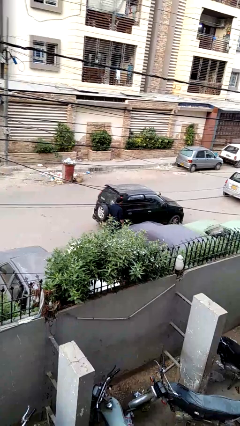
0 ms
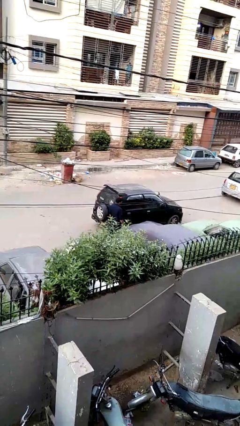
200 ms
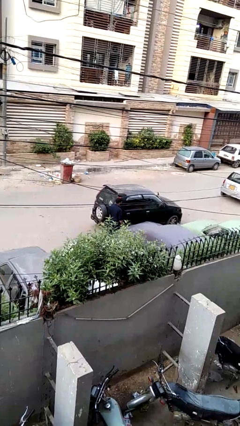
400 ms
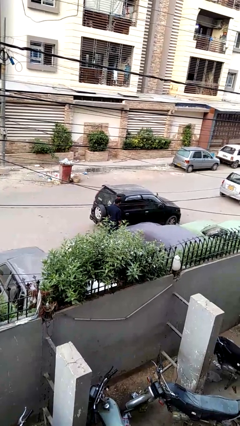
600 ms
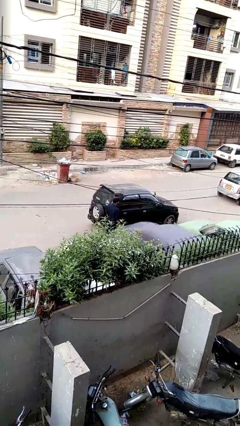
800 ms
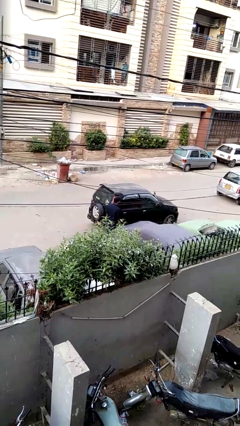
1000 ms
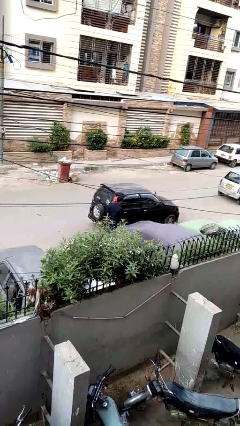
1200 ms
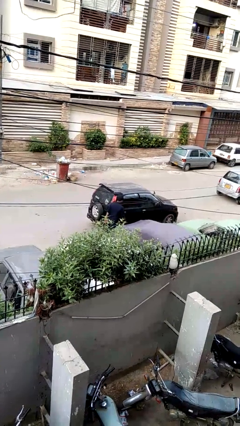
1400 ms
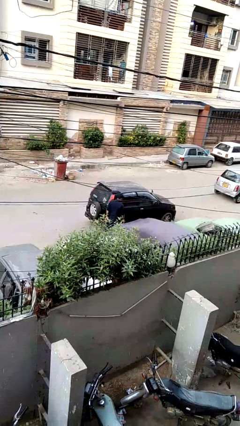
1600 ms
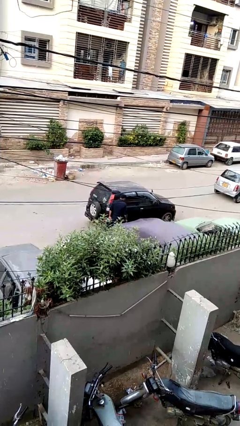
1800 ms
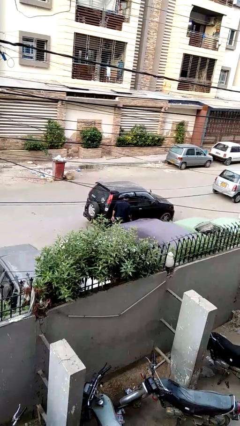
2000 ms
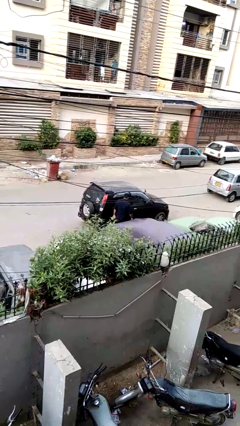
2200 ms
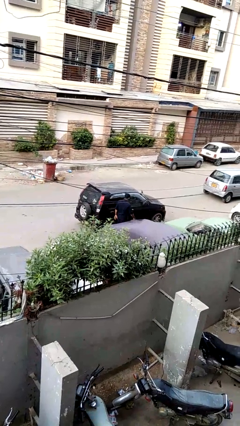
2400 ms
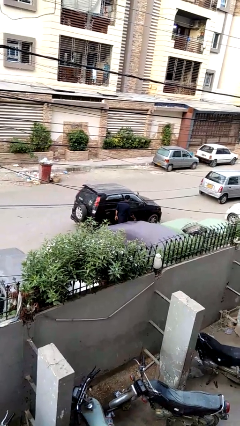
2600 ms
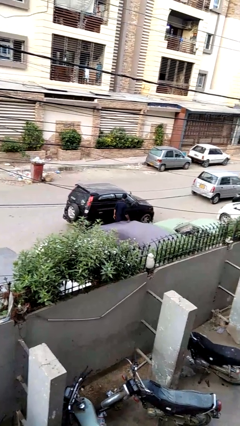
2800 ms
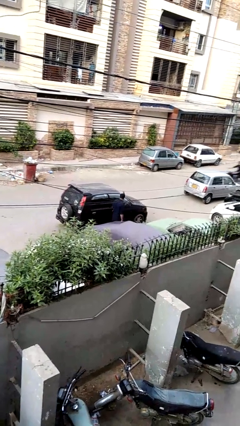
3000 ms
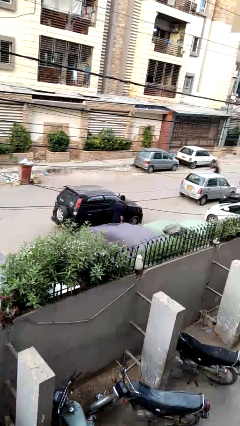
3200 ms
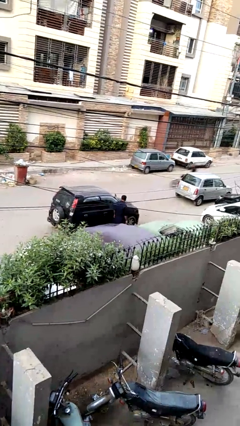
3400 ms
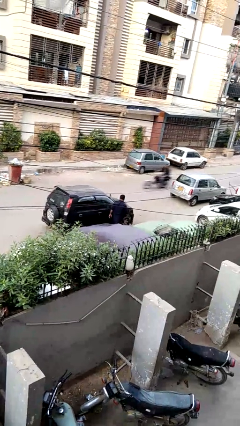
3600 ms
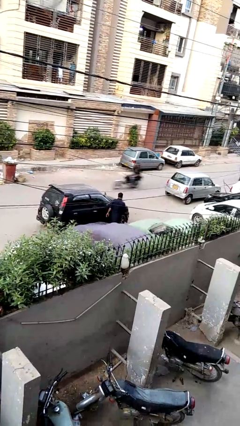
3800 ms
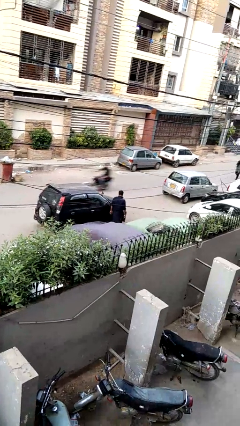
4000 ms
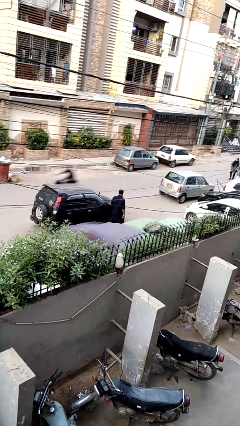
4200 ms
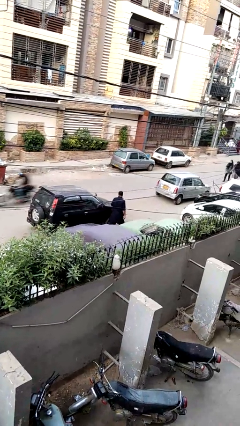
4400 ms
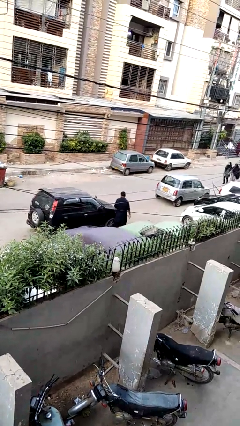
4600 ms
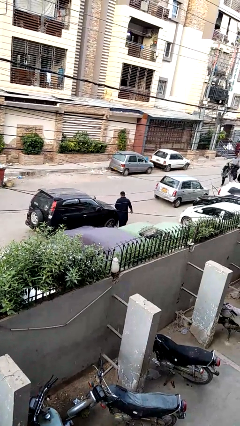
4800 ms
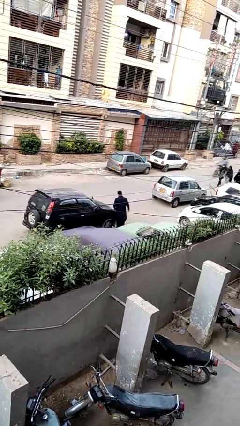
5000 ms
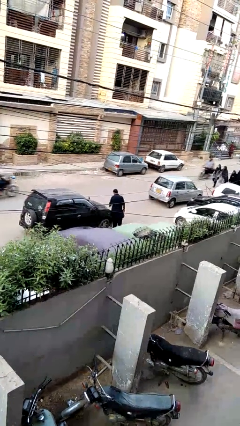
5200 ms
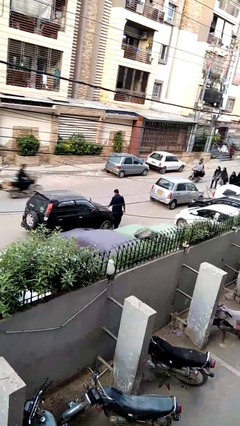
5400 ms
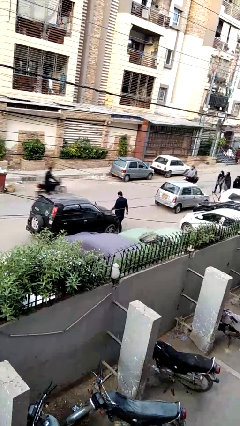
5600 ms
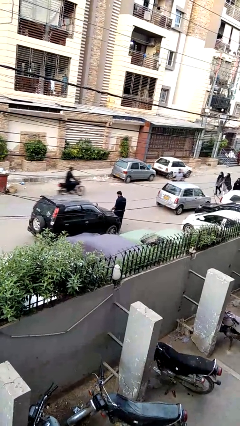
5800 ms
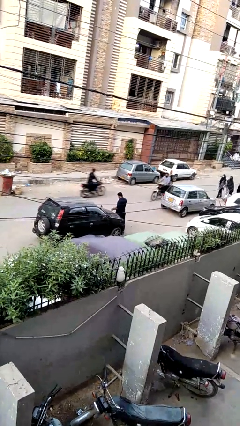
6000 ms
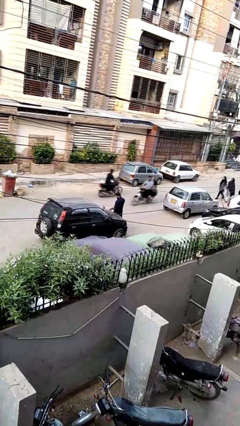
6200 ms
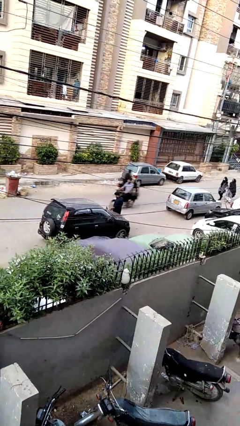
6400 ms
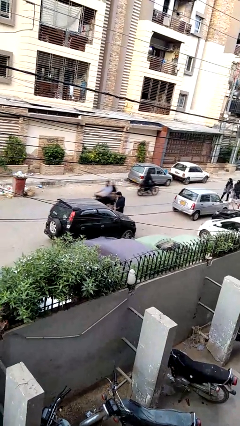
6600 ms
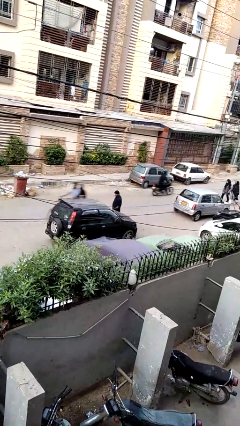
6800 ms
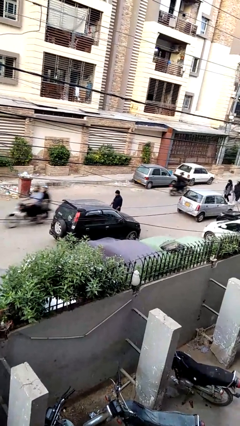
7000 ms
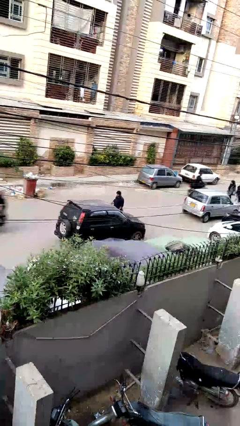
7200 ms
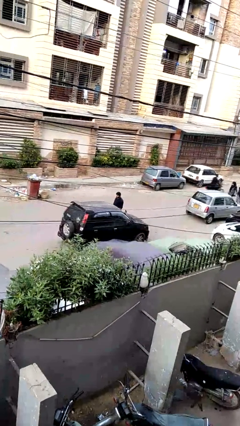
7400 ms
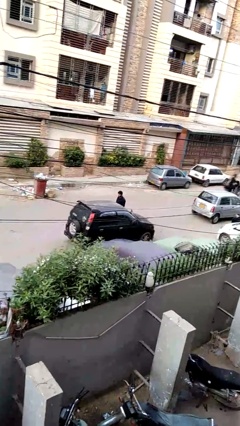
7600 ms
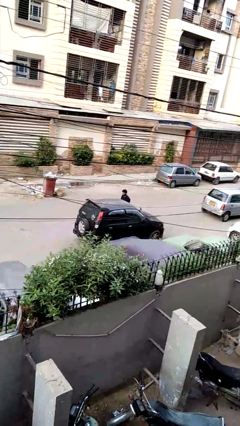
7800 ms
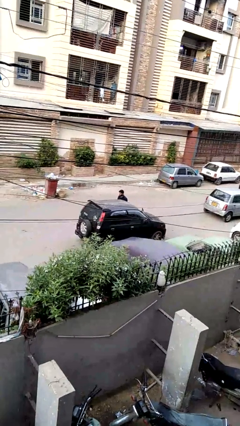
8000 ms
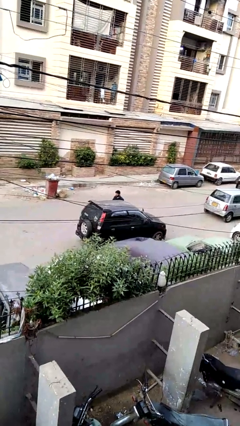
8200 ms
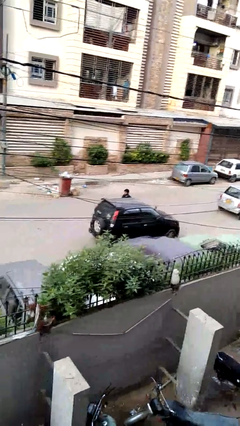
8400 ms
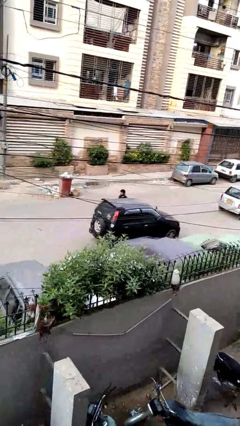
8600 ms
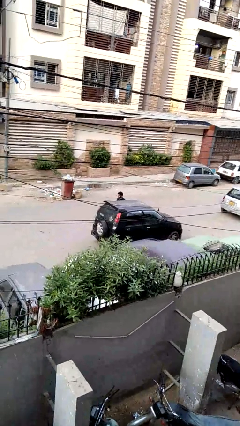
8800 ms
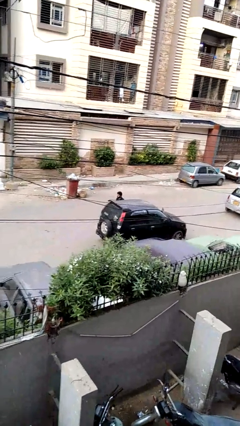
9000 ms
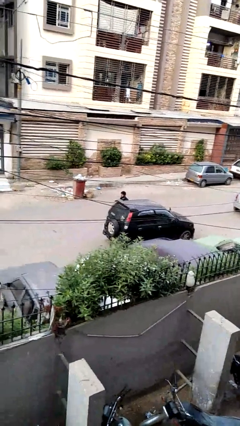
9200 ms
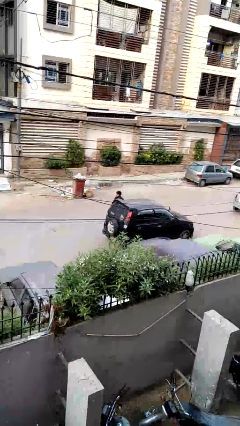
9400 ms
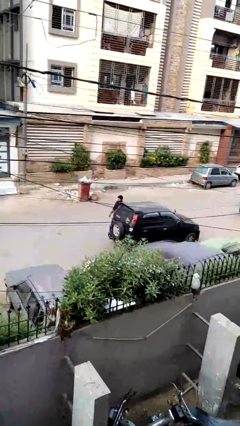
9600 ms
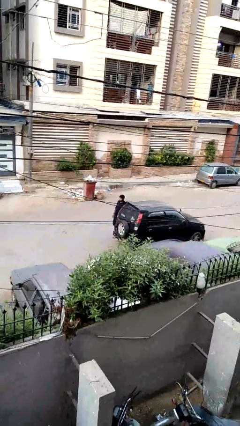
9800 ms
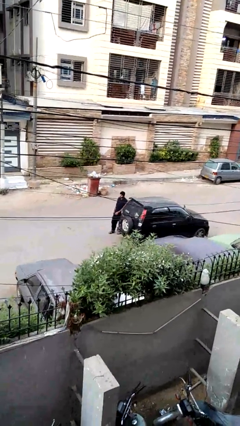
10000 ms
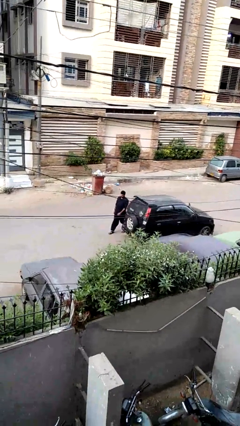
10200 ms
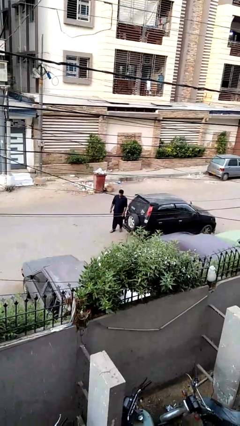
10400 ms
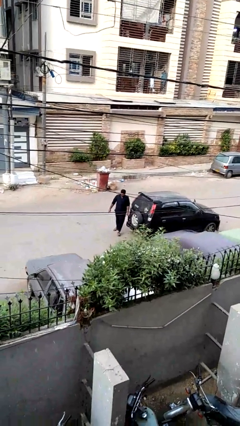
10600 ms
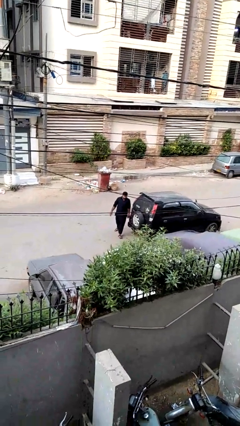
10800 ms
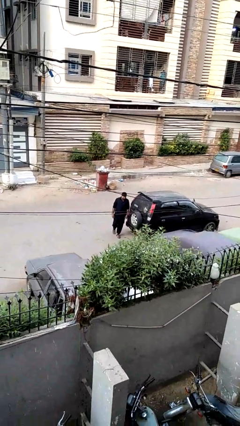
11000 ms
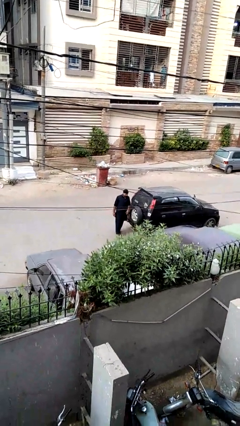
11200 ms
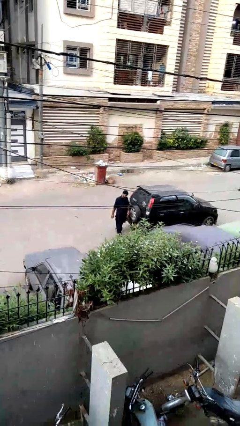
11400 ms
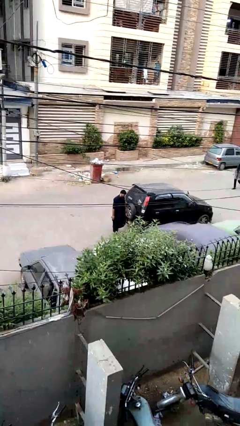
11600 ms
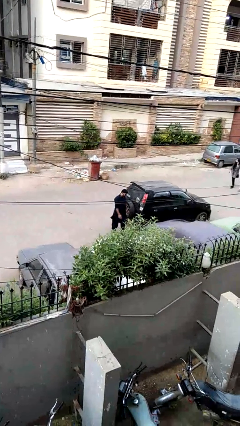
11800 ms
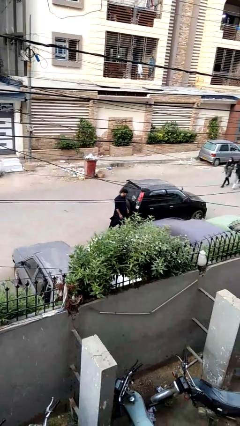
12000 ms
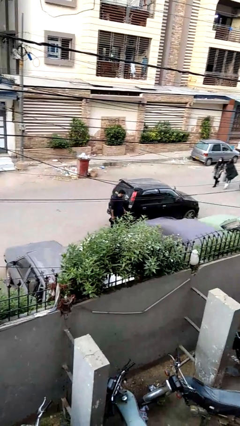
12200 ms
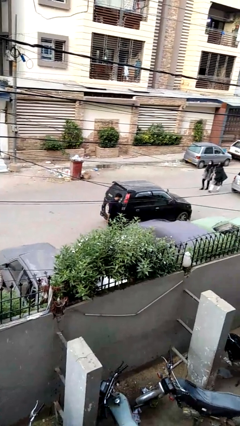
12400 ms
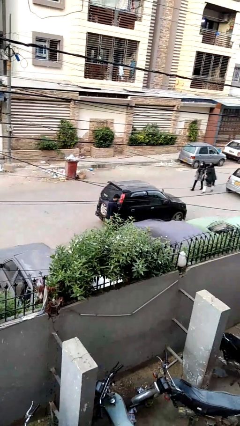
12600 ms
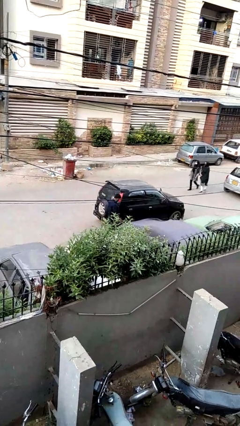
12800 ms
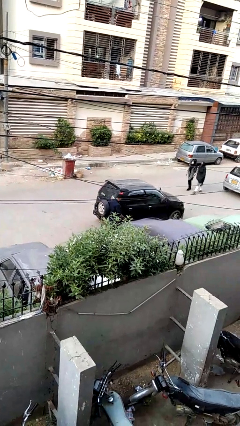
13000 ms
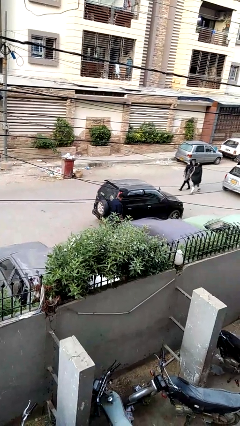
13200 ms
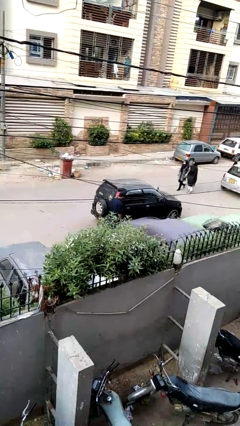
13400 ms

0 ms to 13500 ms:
person walks around car

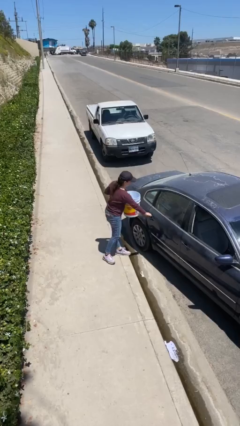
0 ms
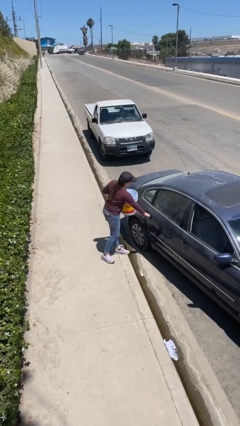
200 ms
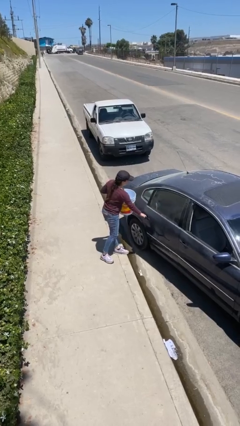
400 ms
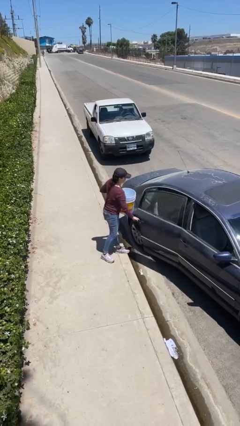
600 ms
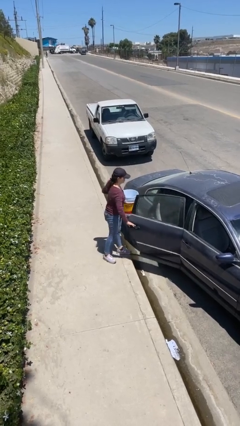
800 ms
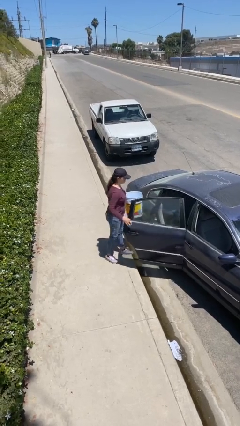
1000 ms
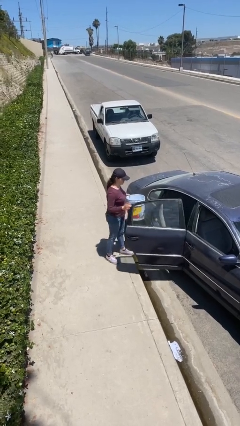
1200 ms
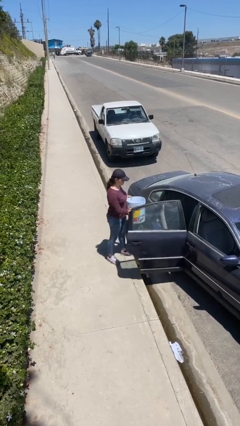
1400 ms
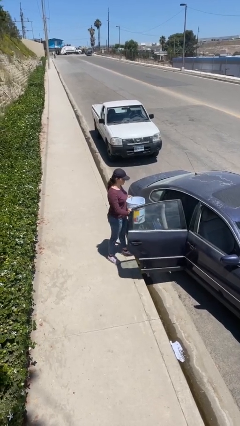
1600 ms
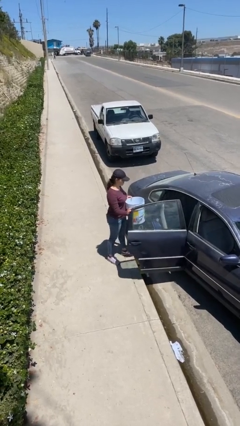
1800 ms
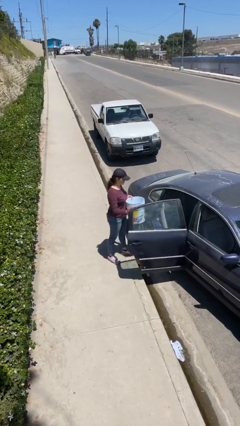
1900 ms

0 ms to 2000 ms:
person opens car door

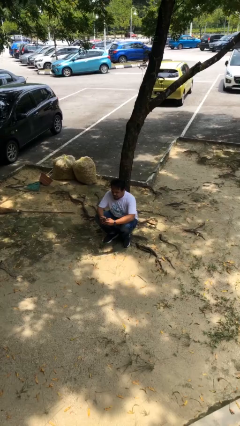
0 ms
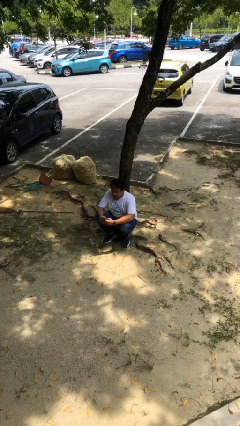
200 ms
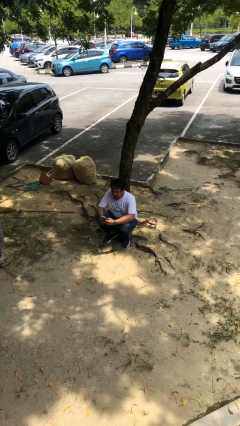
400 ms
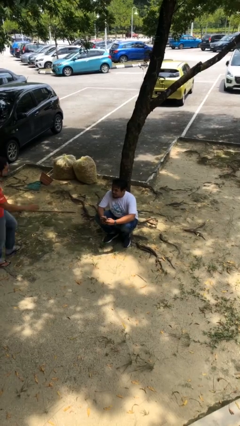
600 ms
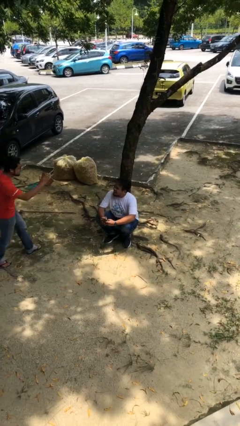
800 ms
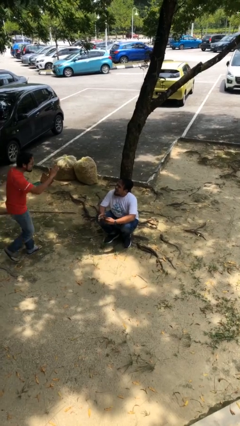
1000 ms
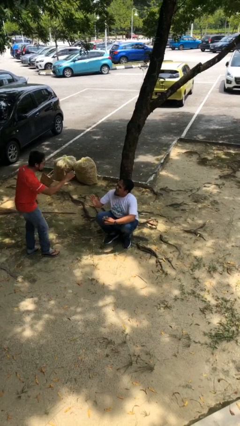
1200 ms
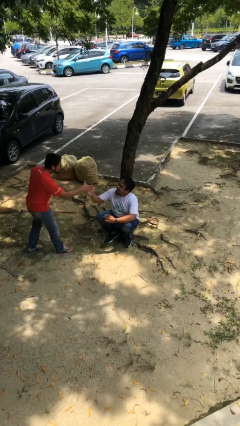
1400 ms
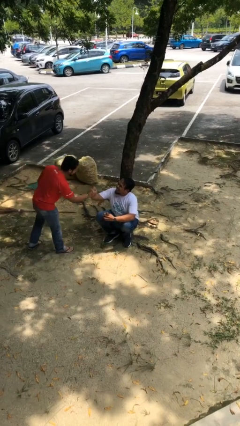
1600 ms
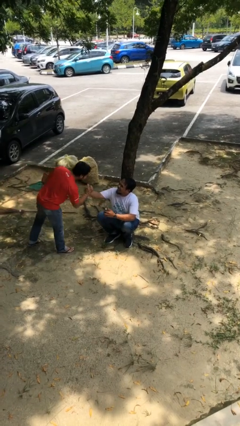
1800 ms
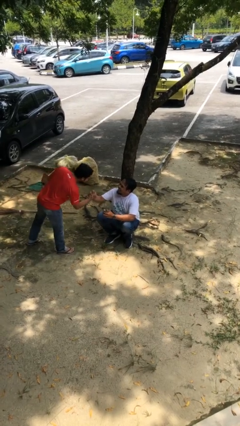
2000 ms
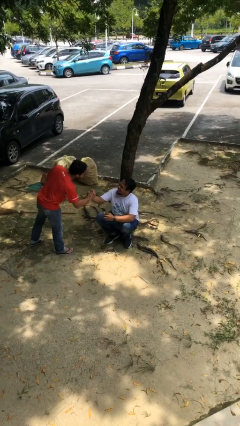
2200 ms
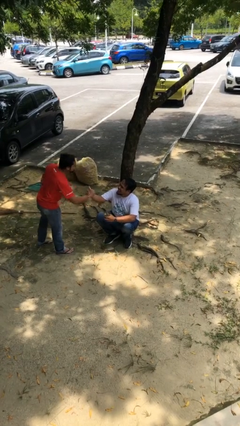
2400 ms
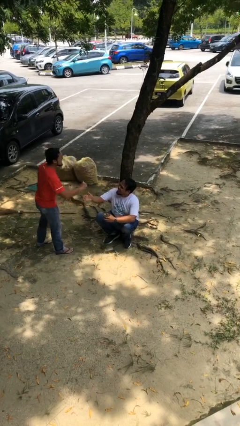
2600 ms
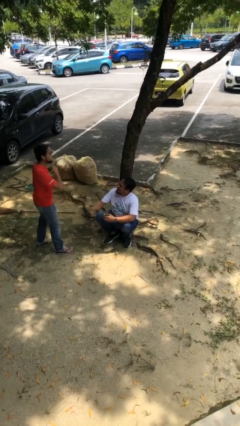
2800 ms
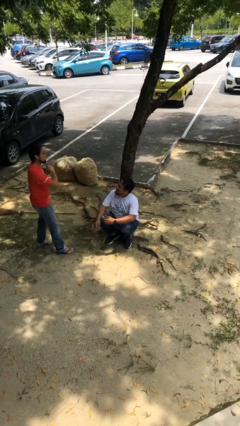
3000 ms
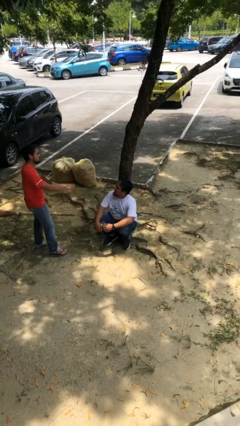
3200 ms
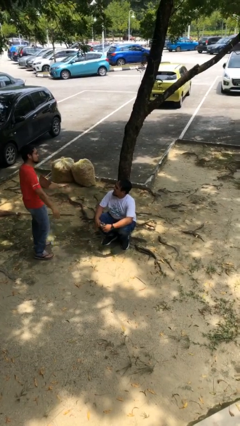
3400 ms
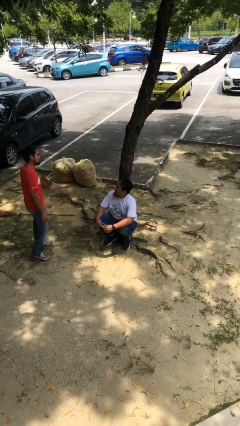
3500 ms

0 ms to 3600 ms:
person shakes hand
